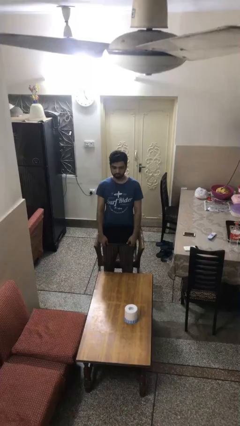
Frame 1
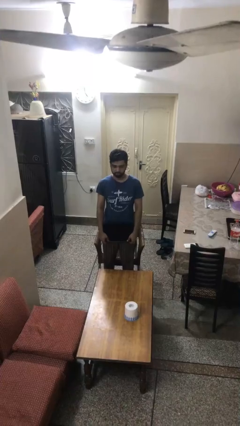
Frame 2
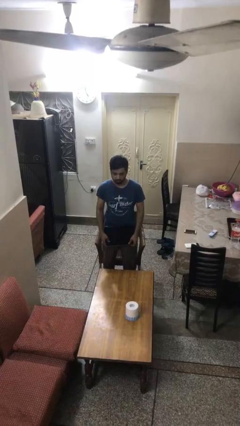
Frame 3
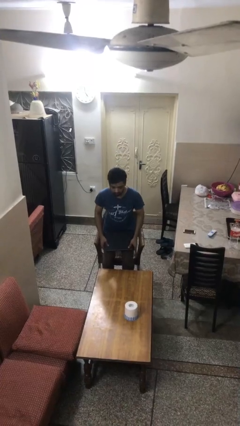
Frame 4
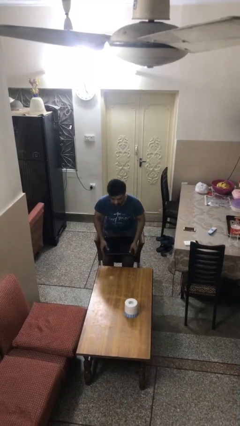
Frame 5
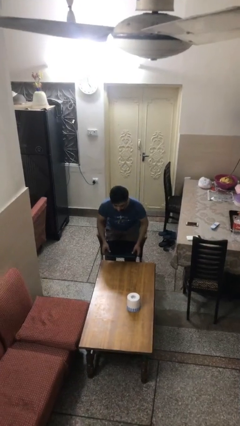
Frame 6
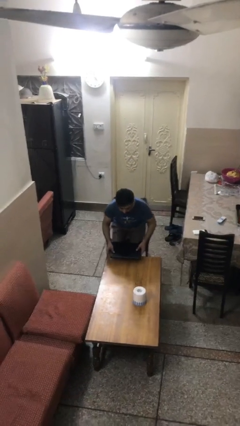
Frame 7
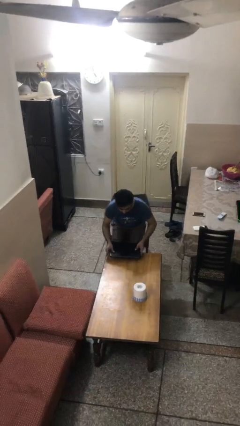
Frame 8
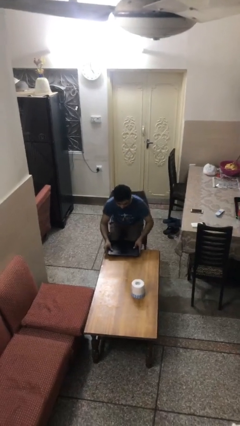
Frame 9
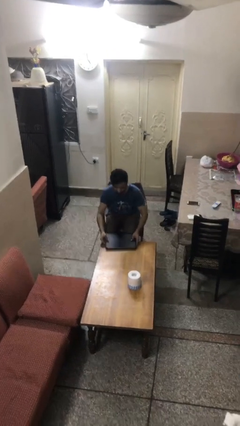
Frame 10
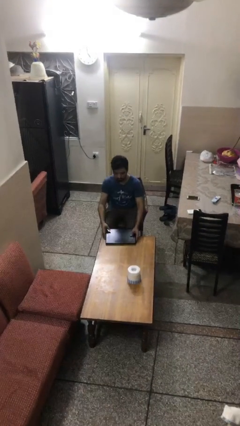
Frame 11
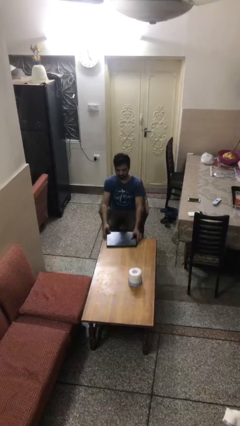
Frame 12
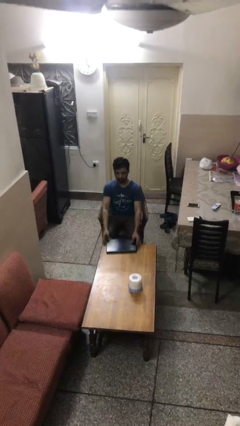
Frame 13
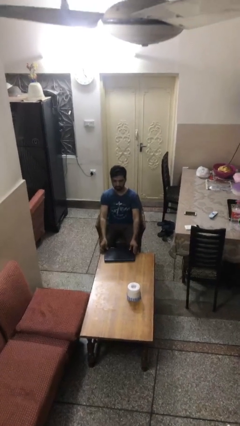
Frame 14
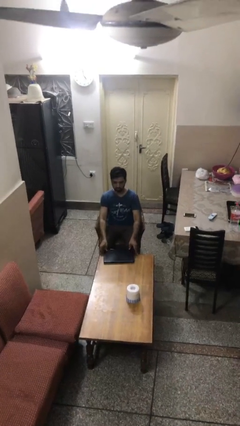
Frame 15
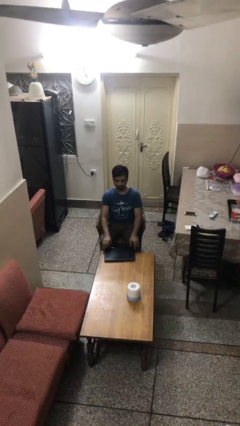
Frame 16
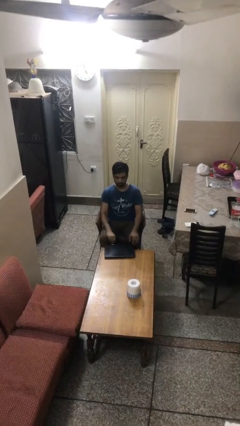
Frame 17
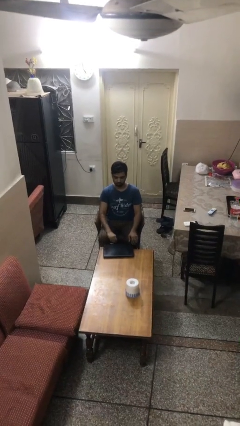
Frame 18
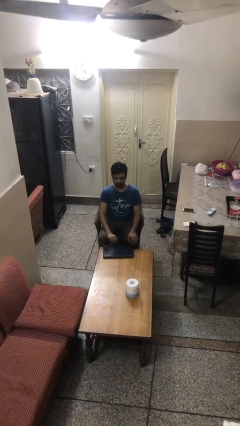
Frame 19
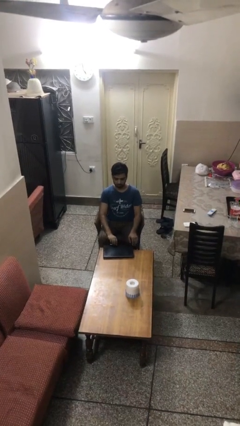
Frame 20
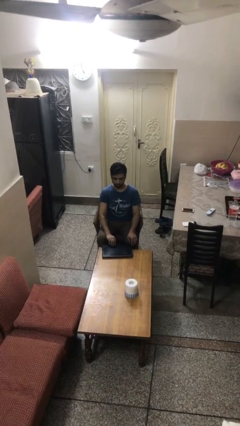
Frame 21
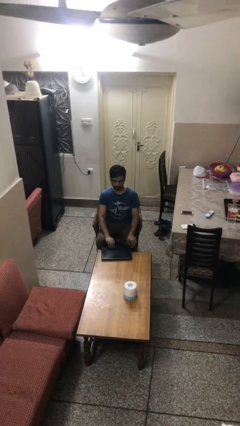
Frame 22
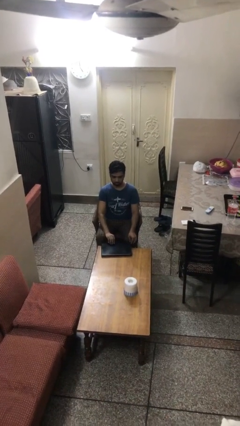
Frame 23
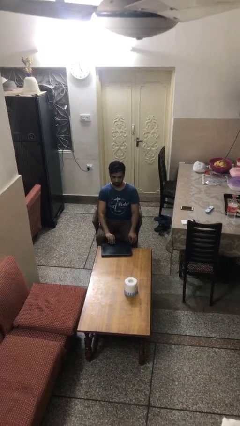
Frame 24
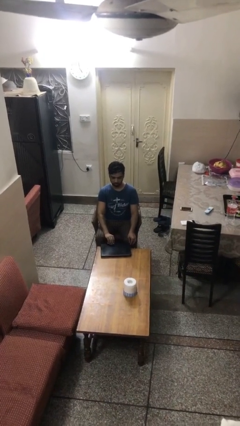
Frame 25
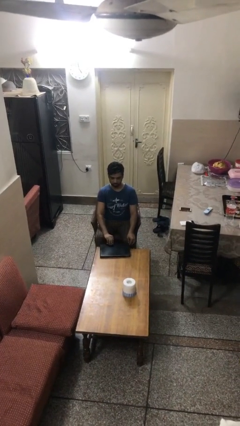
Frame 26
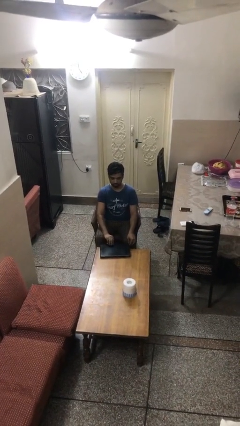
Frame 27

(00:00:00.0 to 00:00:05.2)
person sits down

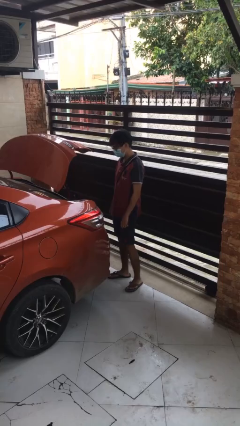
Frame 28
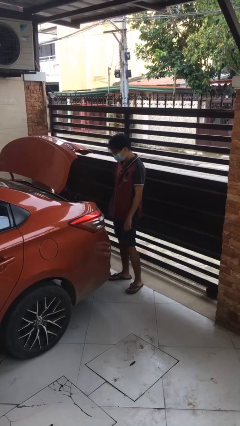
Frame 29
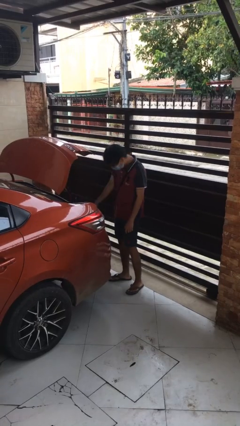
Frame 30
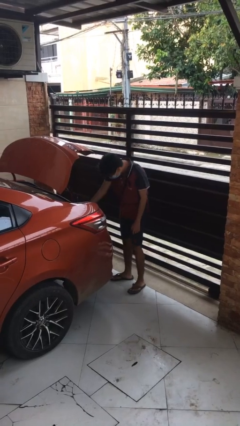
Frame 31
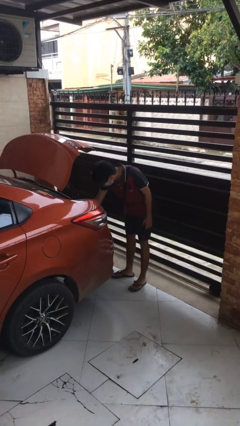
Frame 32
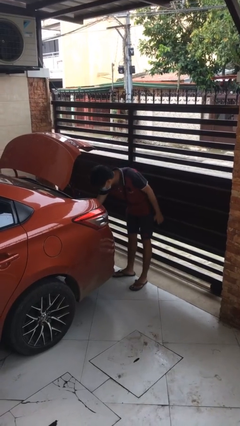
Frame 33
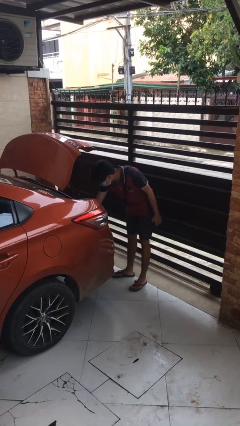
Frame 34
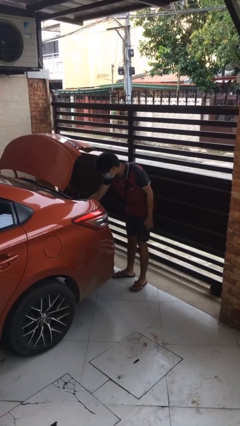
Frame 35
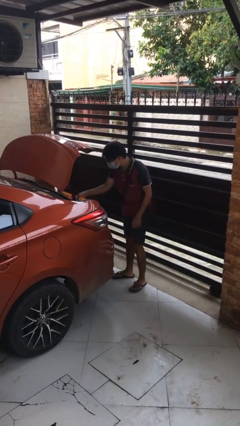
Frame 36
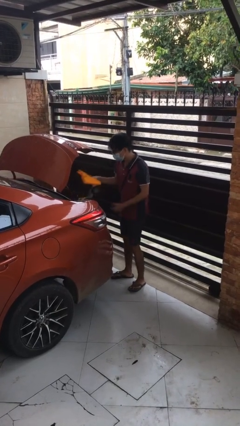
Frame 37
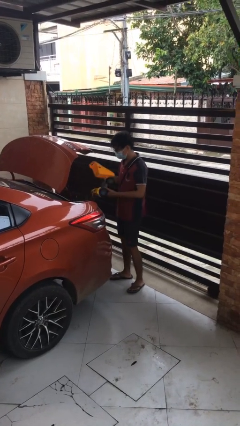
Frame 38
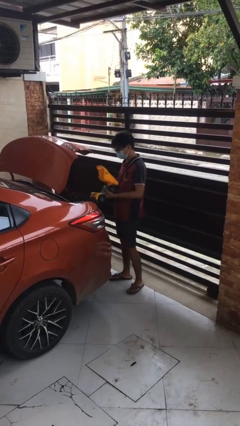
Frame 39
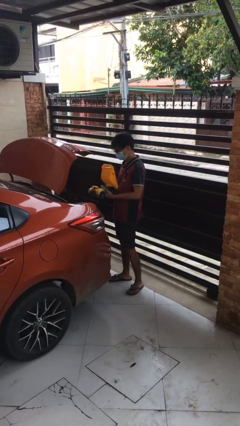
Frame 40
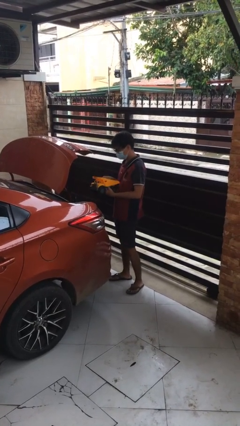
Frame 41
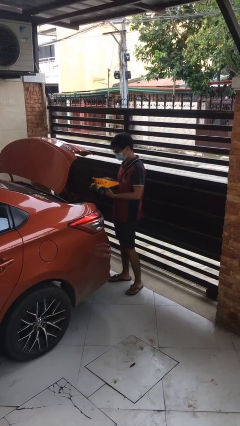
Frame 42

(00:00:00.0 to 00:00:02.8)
person unloads car

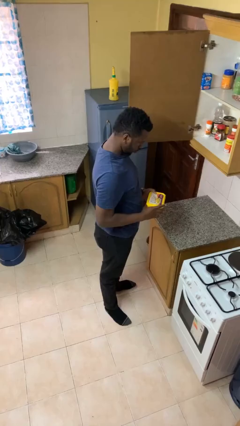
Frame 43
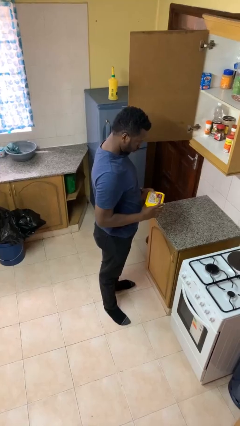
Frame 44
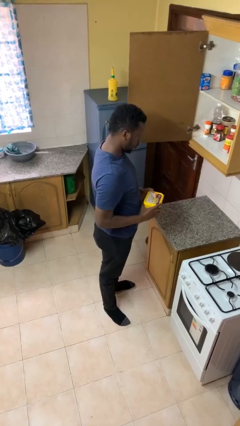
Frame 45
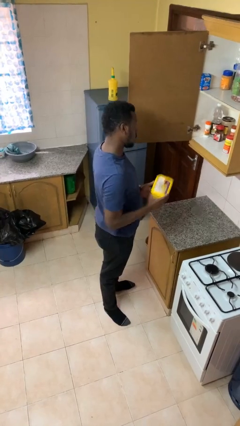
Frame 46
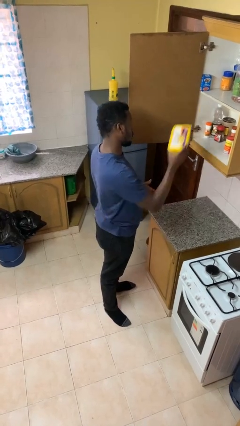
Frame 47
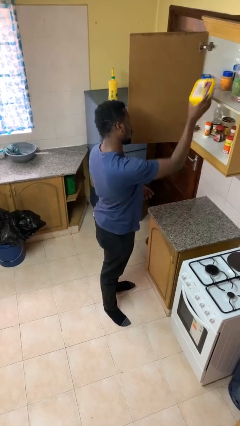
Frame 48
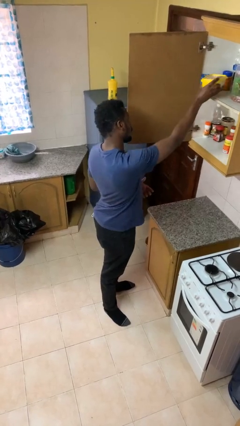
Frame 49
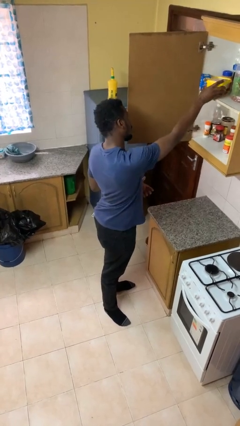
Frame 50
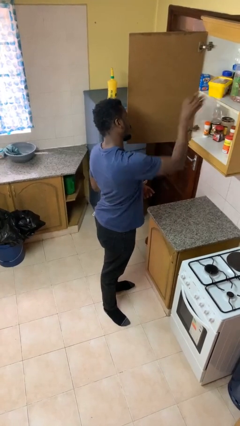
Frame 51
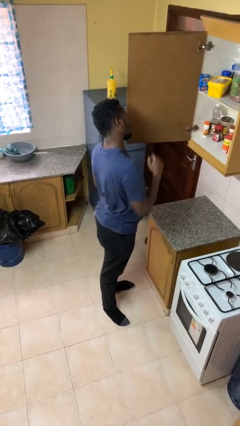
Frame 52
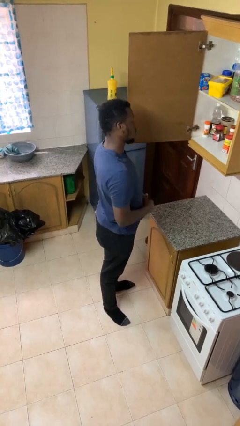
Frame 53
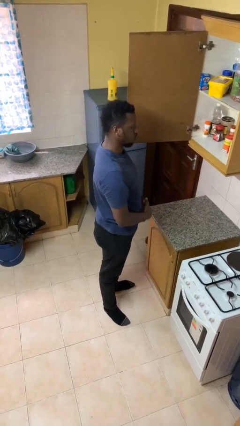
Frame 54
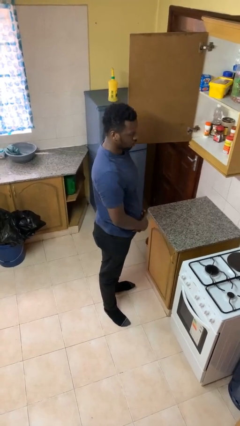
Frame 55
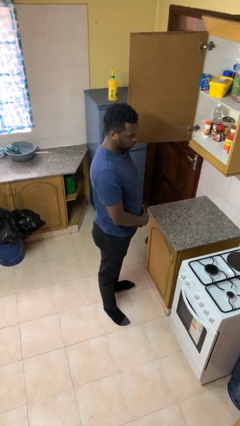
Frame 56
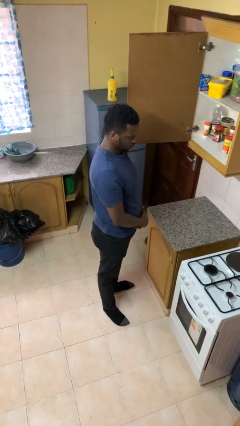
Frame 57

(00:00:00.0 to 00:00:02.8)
person puts down object on shelf

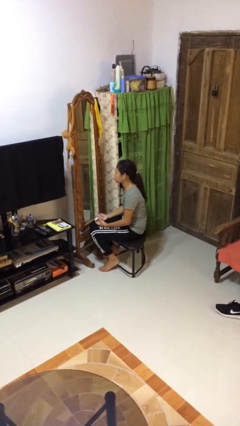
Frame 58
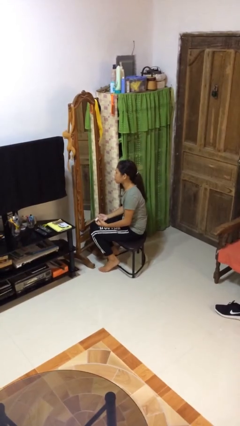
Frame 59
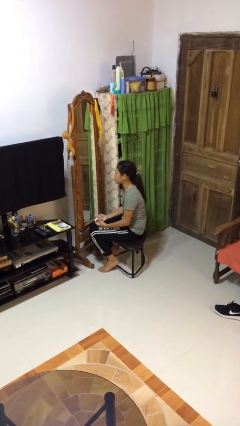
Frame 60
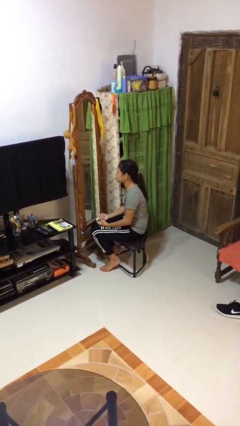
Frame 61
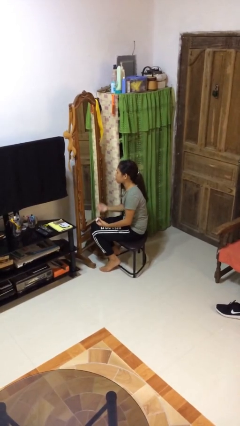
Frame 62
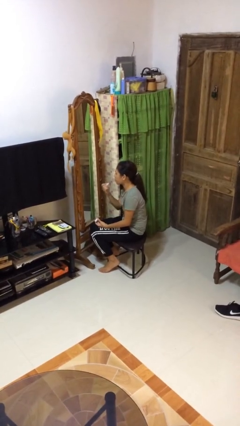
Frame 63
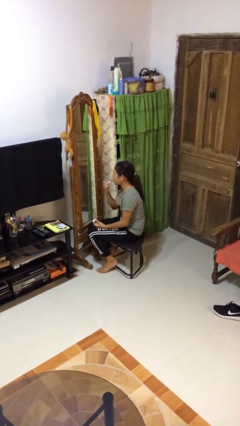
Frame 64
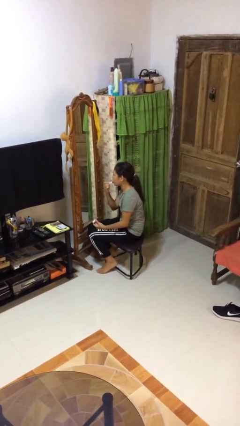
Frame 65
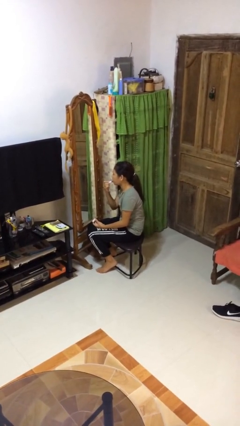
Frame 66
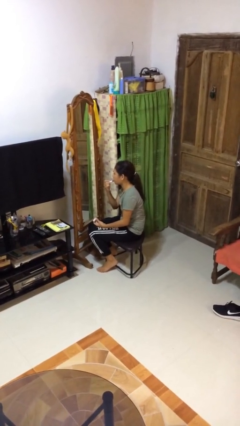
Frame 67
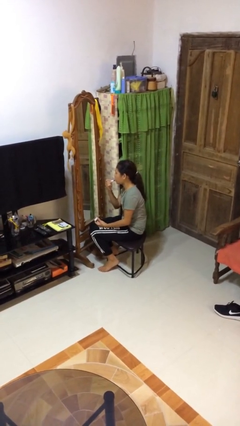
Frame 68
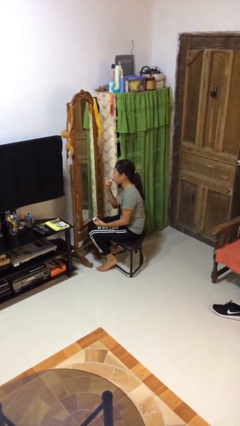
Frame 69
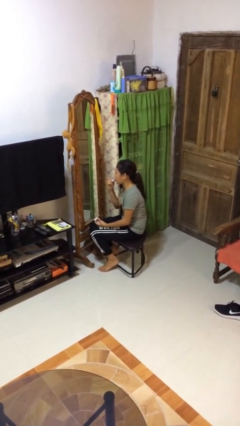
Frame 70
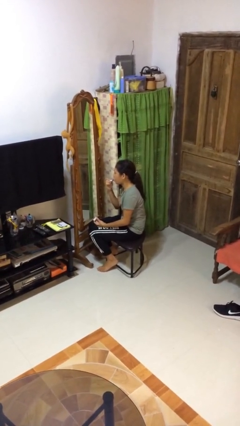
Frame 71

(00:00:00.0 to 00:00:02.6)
person applies lip makeup

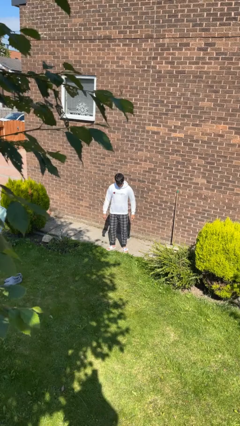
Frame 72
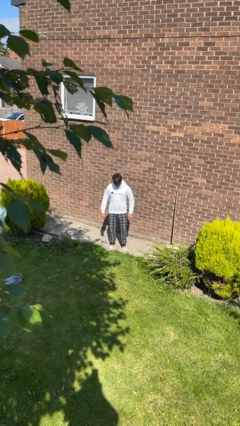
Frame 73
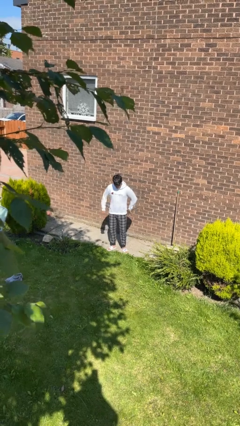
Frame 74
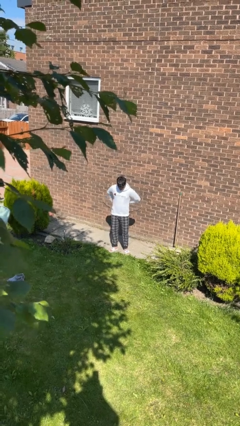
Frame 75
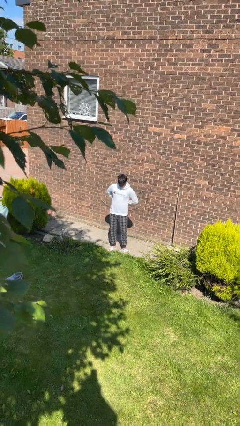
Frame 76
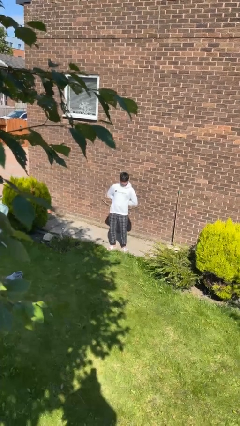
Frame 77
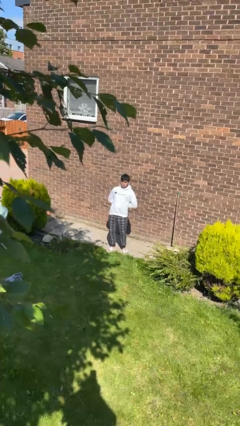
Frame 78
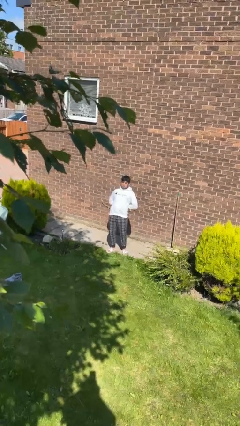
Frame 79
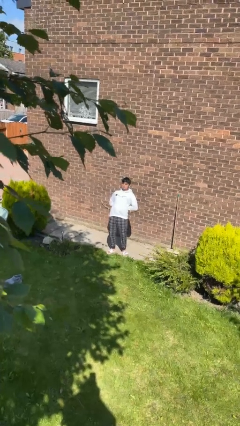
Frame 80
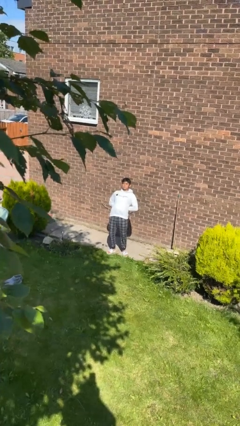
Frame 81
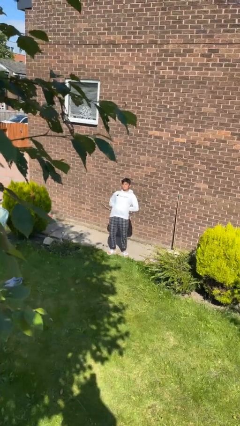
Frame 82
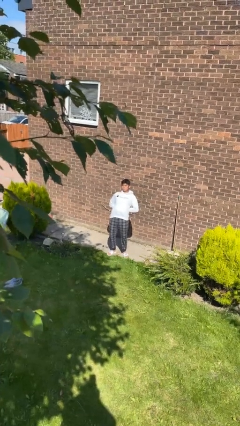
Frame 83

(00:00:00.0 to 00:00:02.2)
person stretches back

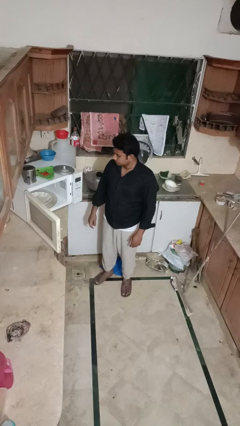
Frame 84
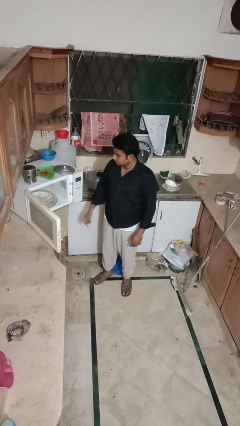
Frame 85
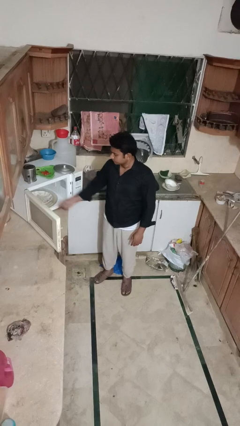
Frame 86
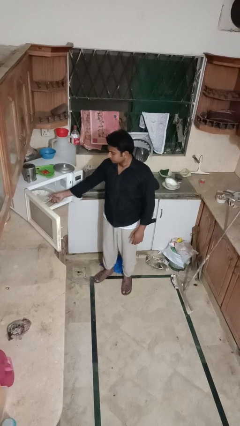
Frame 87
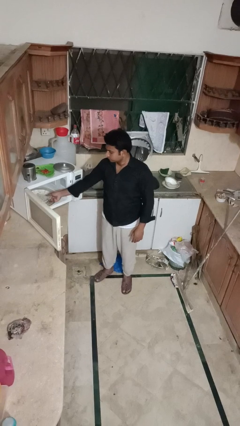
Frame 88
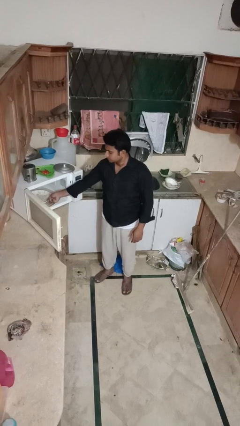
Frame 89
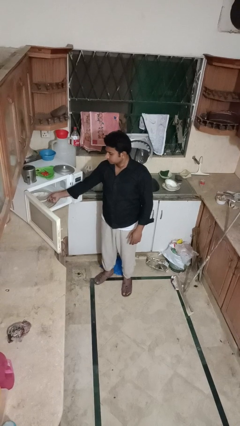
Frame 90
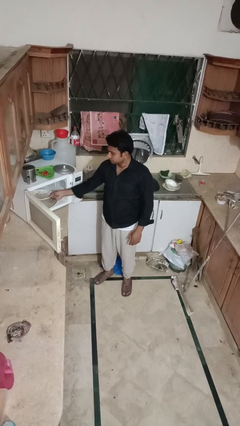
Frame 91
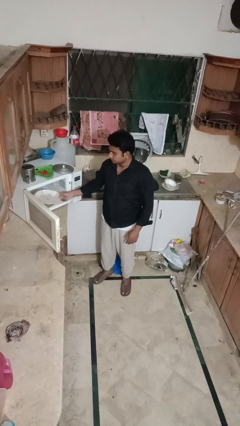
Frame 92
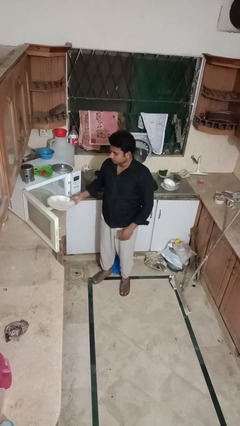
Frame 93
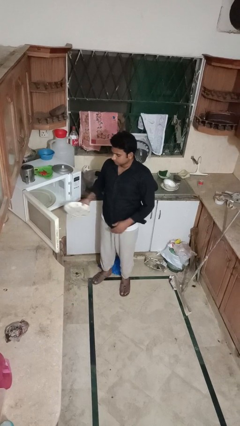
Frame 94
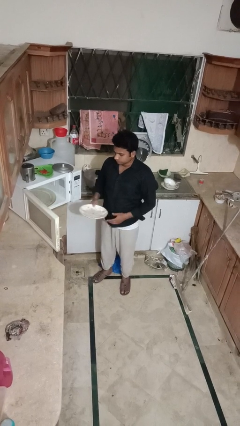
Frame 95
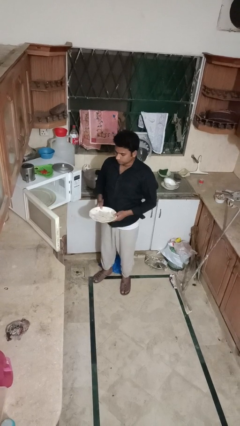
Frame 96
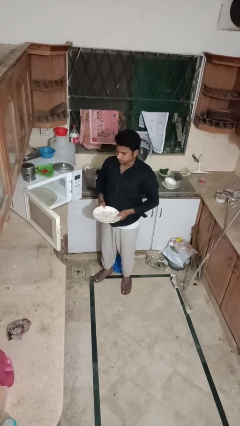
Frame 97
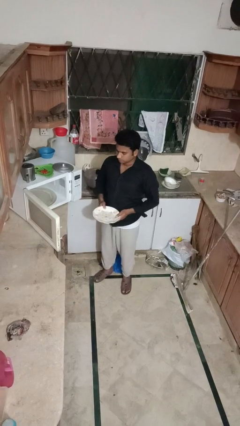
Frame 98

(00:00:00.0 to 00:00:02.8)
person takes object from microwave
